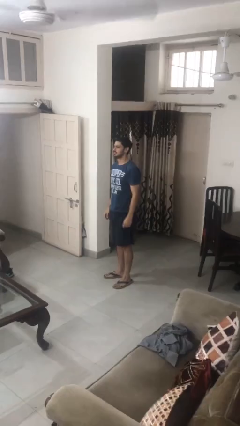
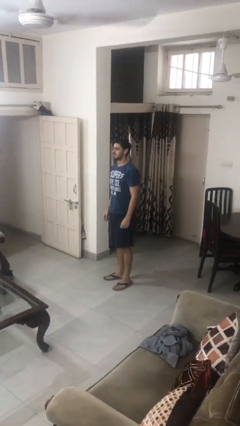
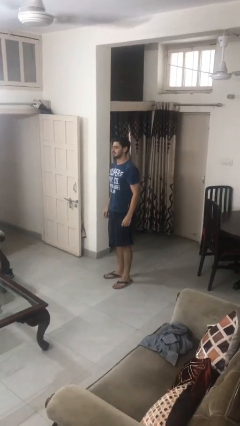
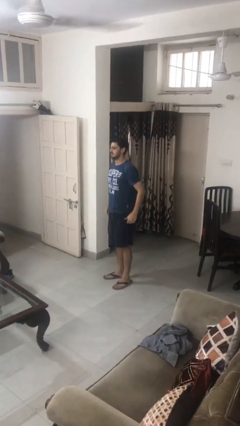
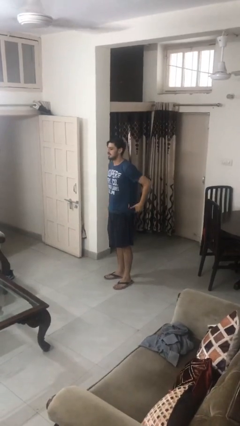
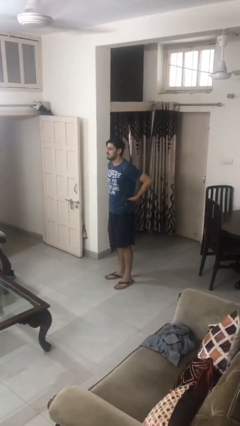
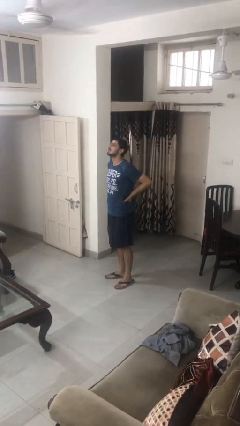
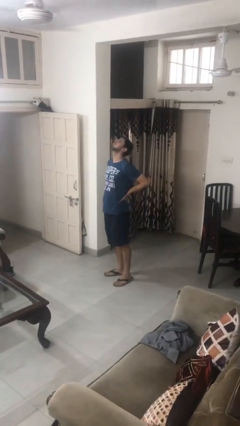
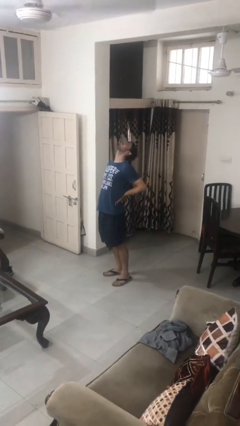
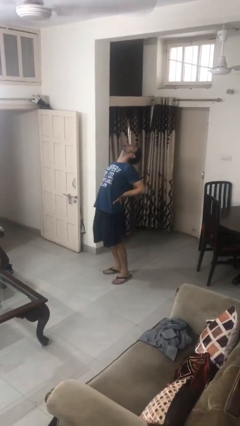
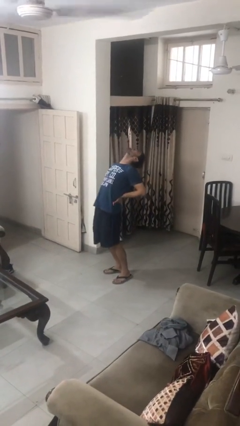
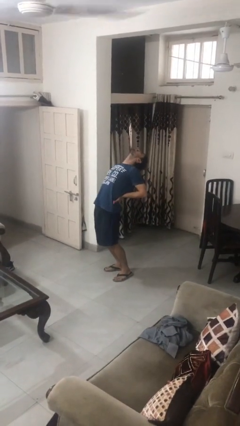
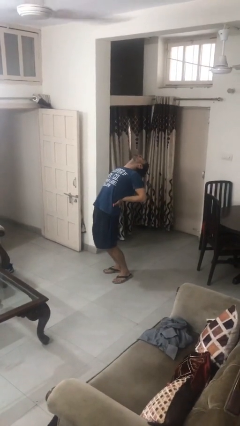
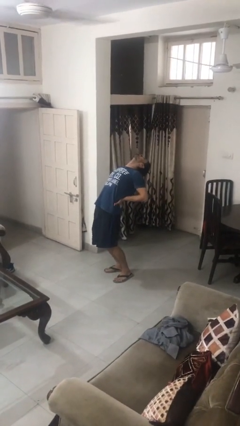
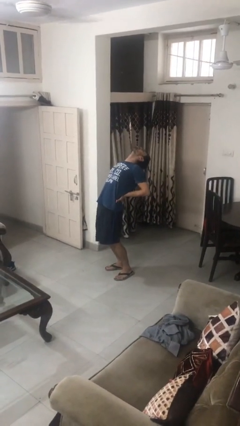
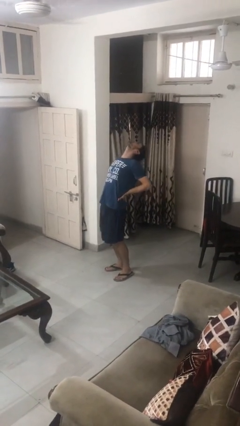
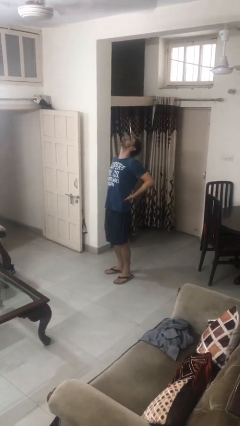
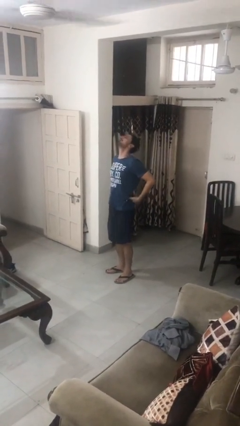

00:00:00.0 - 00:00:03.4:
person stretches back

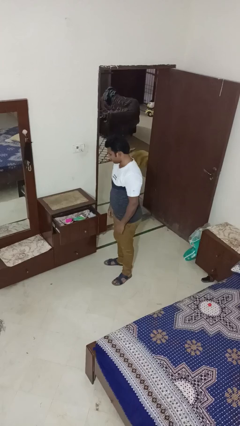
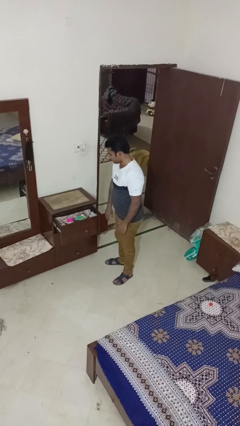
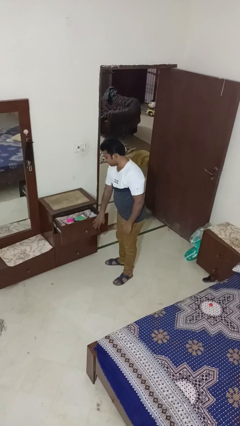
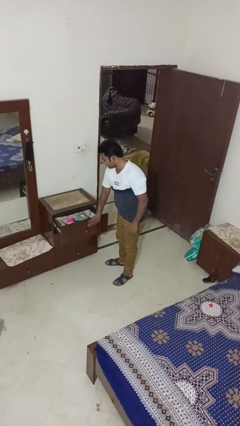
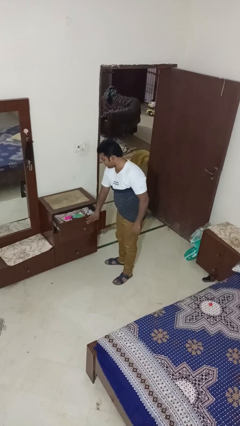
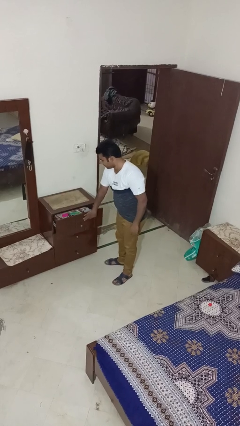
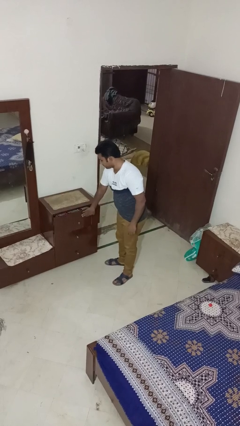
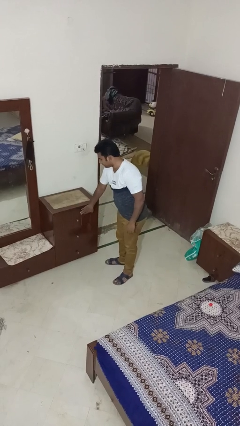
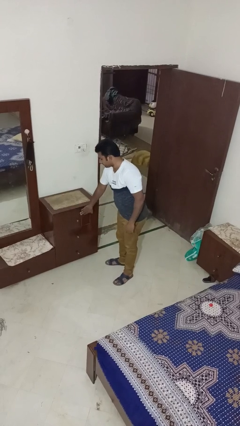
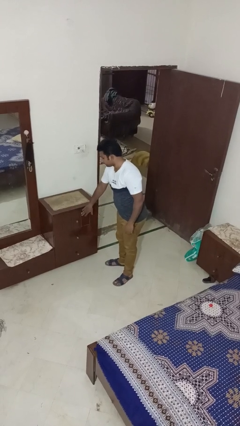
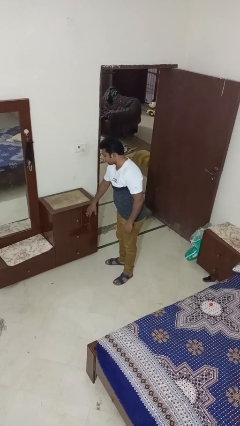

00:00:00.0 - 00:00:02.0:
person closes dresser drawer

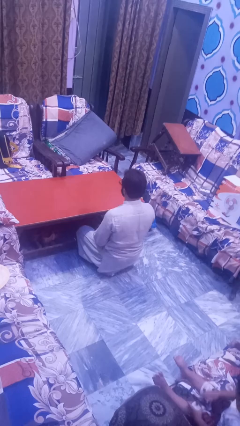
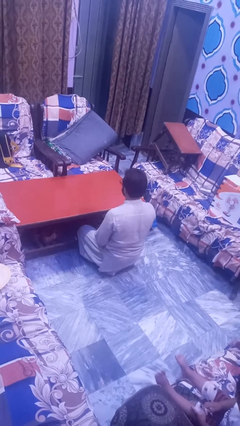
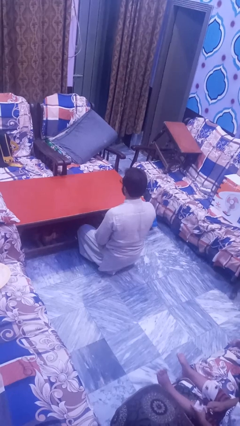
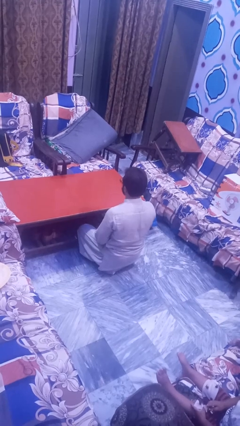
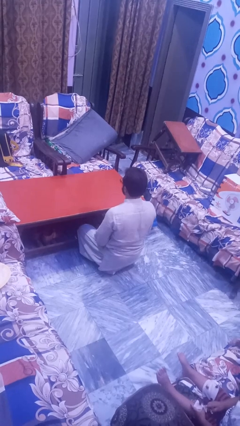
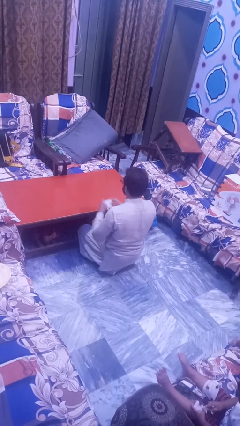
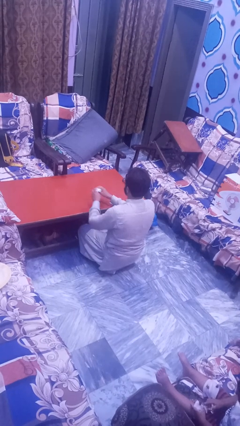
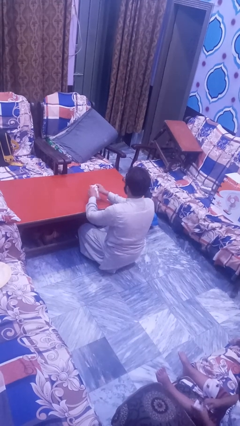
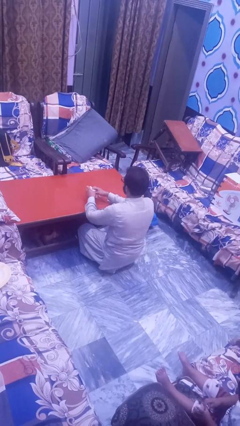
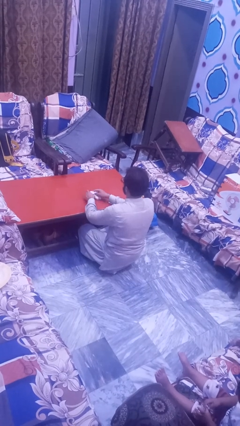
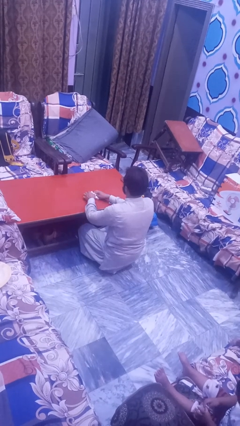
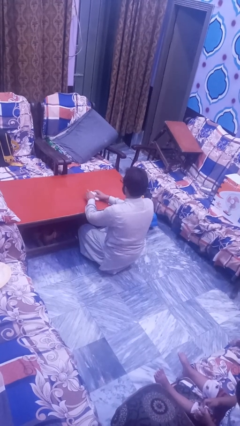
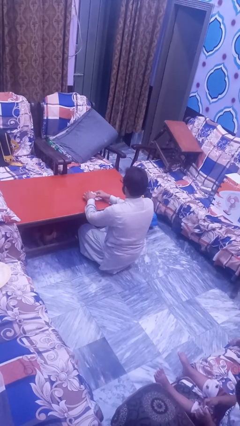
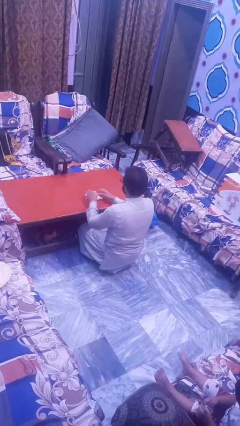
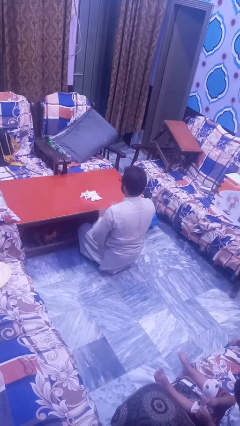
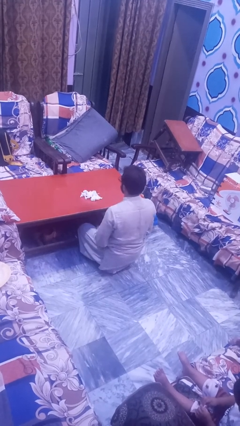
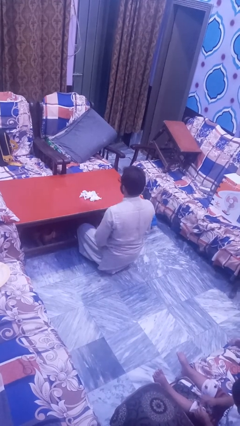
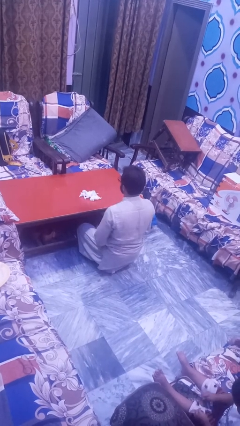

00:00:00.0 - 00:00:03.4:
person tears paper

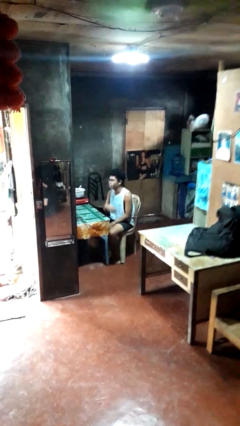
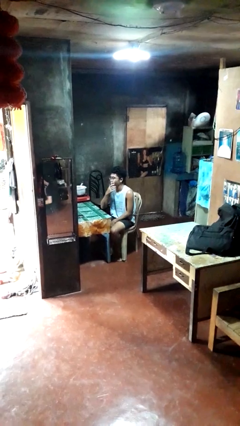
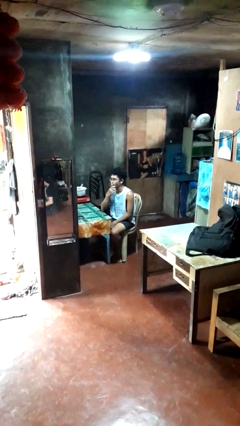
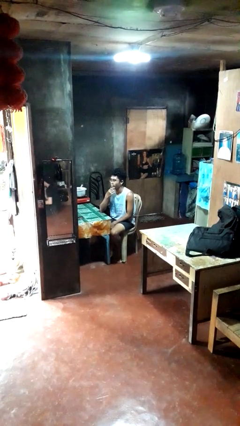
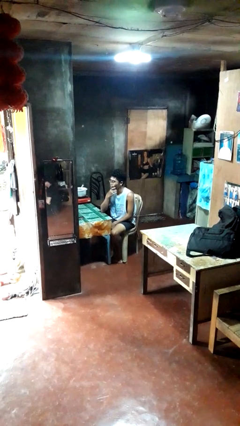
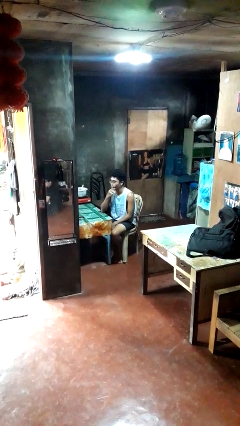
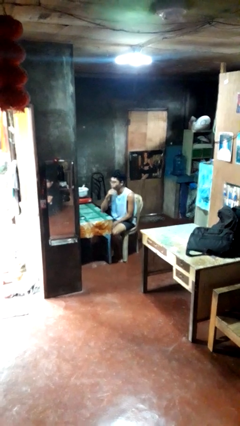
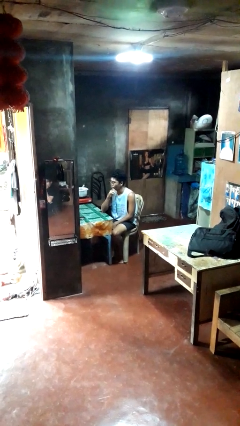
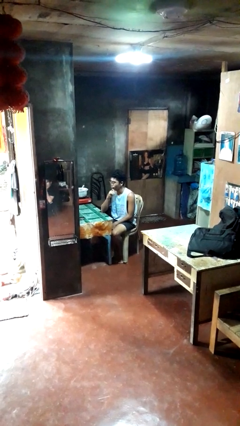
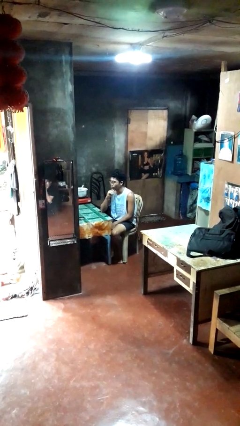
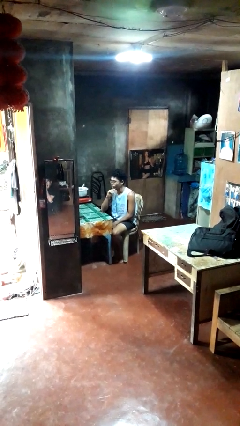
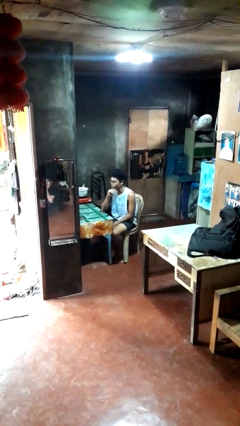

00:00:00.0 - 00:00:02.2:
person strokes chin

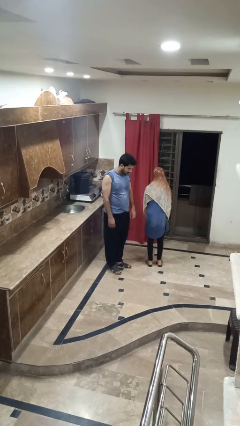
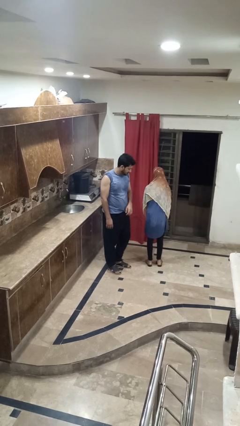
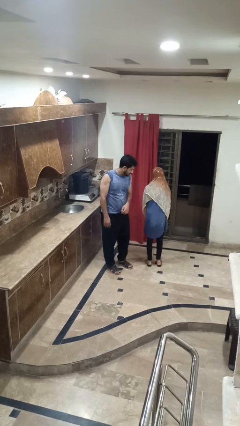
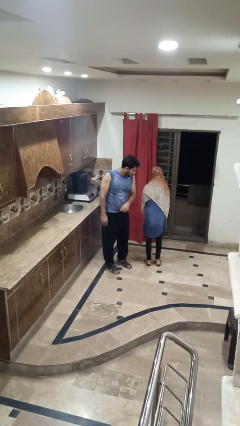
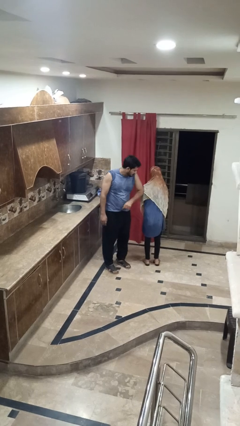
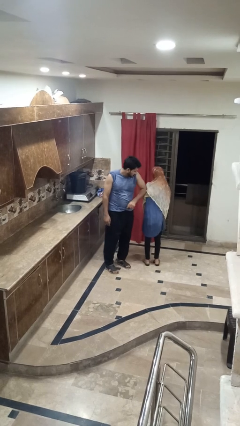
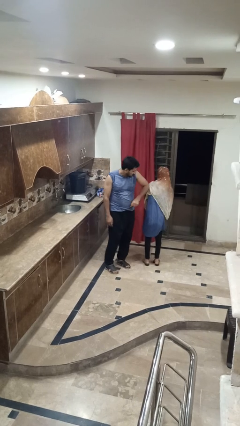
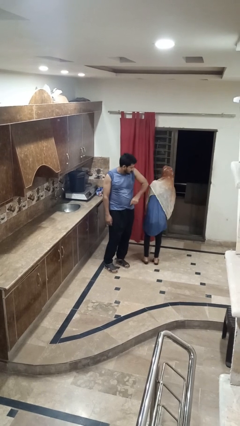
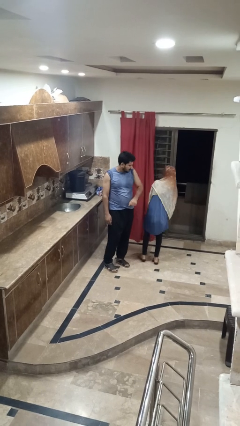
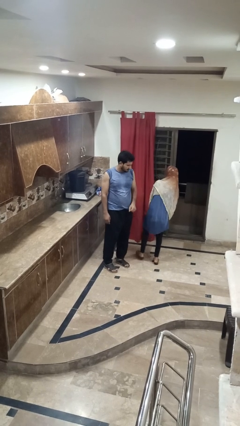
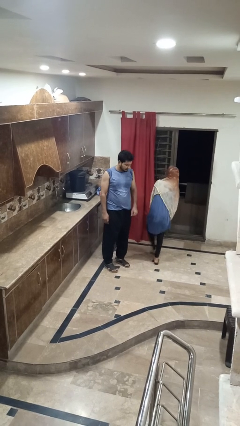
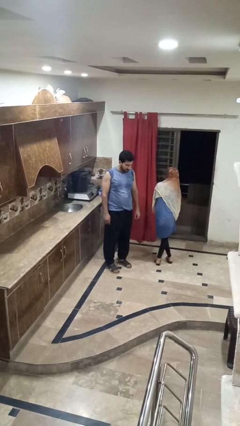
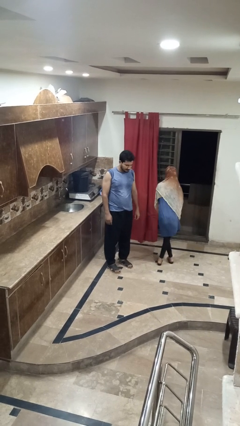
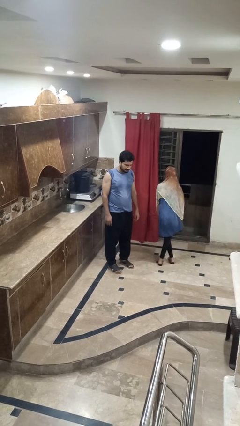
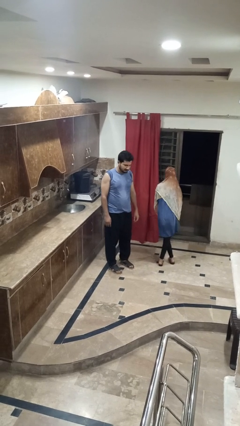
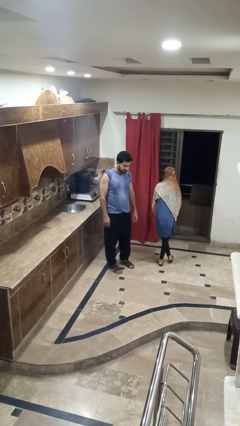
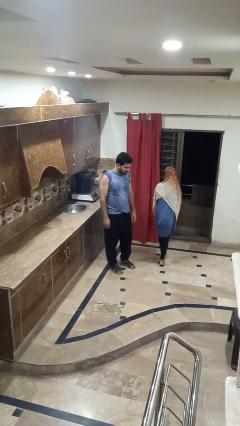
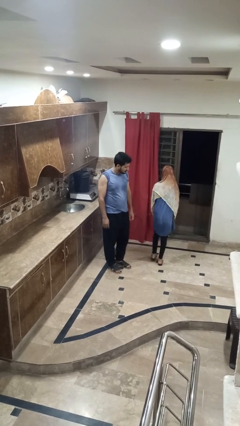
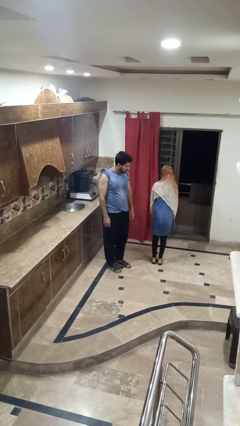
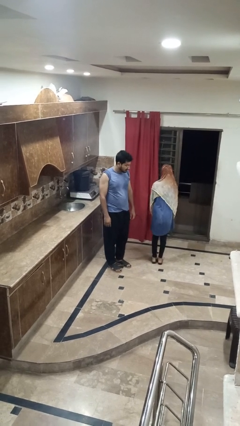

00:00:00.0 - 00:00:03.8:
person nudges person with elbow

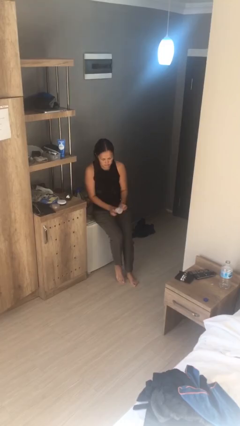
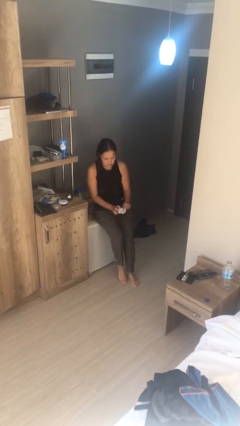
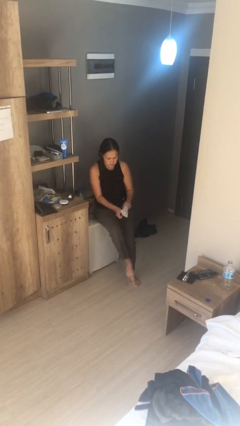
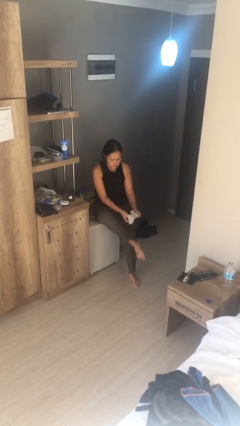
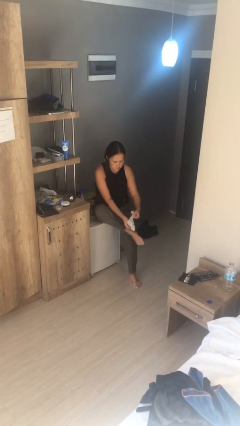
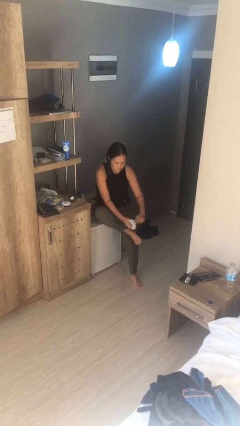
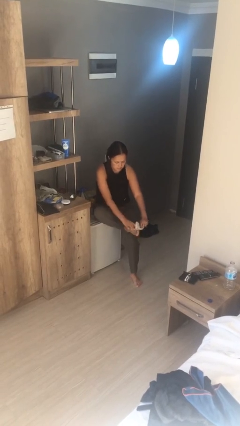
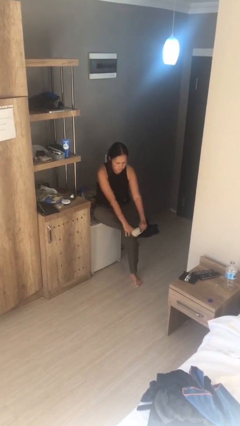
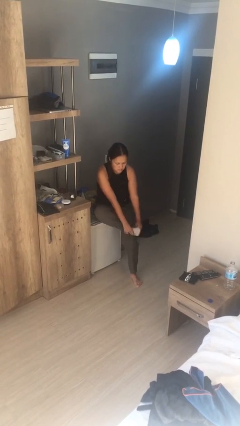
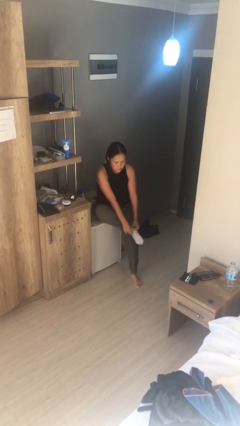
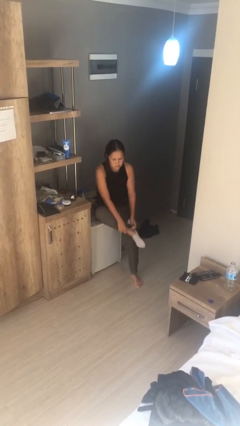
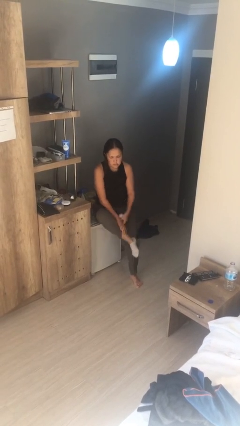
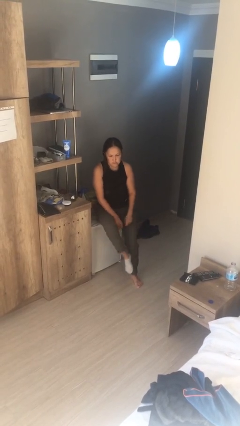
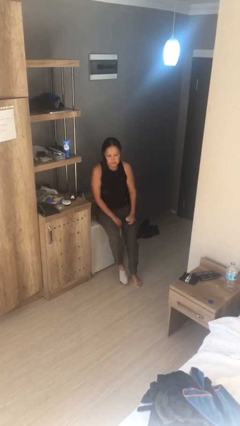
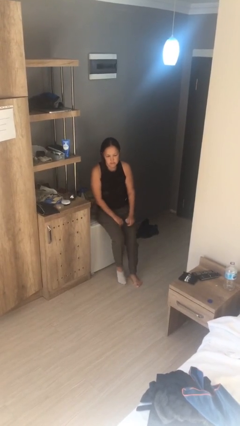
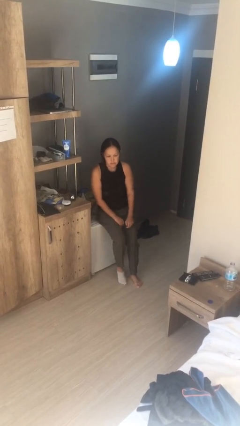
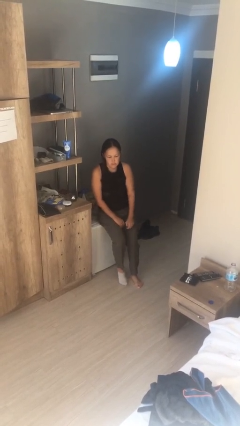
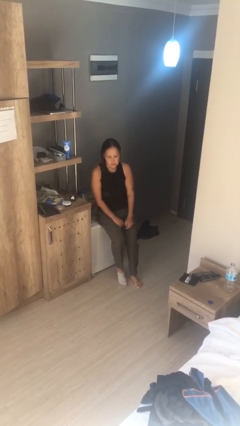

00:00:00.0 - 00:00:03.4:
person puts on socks
